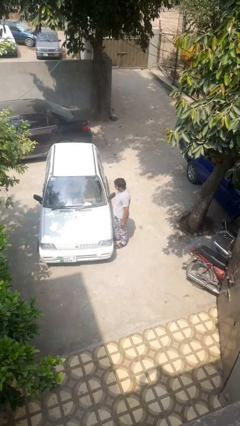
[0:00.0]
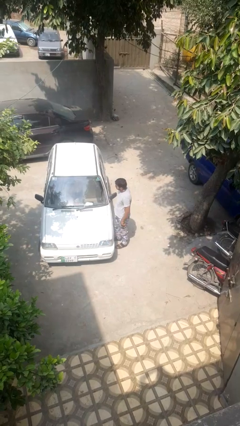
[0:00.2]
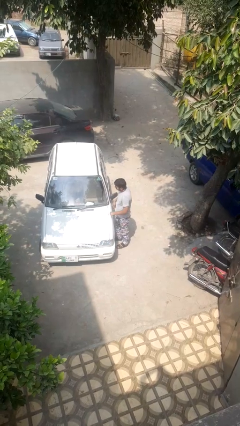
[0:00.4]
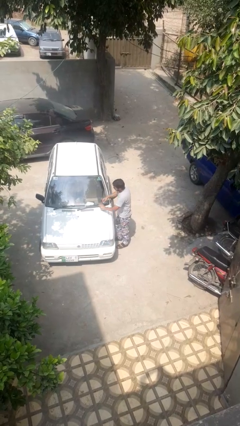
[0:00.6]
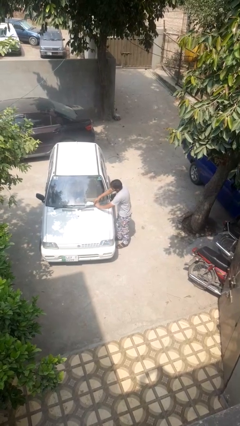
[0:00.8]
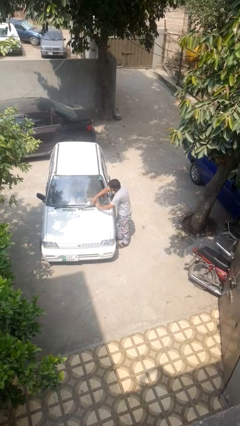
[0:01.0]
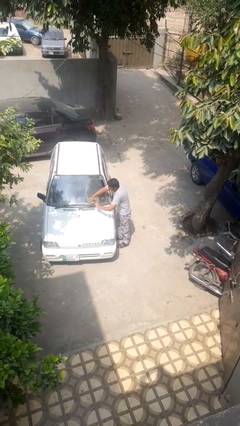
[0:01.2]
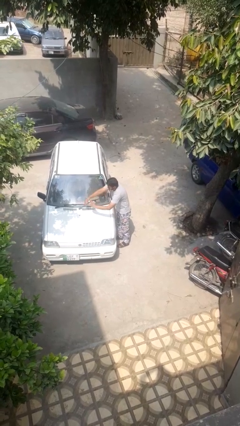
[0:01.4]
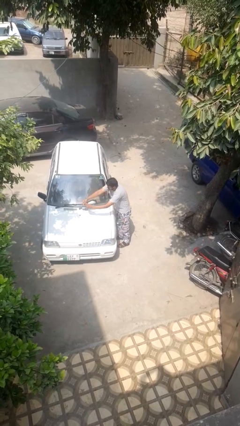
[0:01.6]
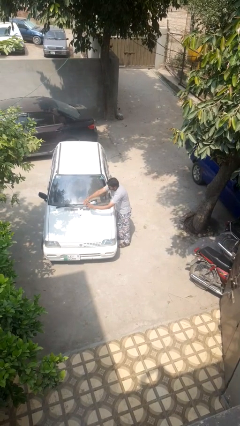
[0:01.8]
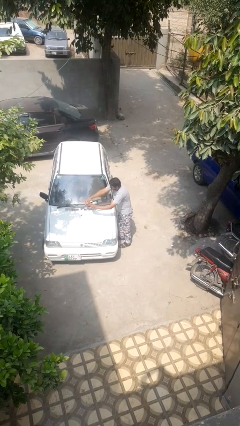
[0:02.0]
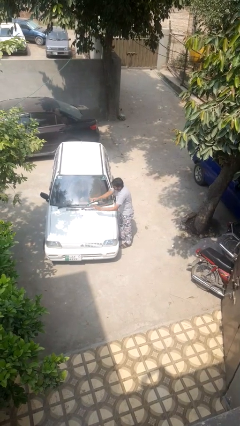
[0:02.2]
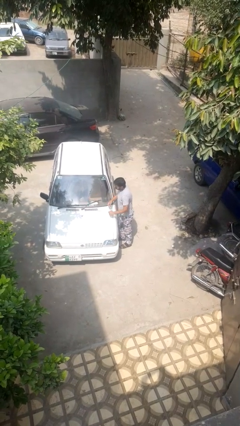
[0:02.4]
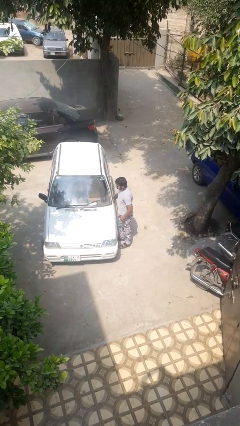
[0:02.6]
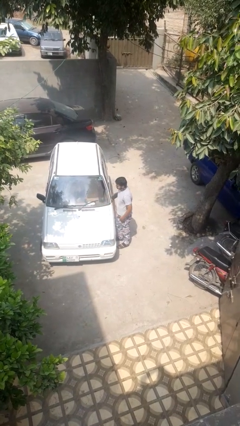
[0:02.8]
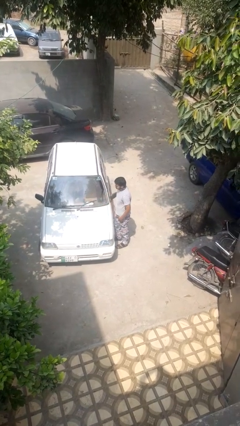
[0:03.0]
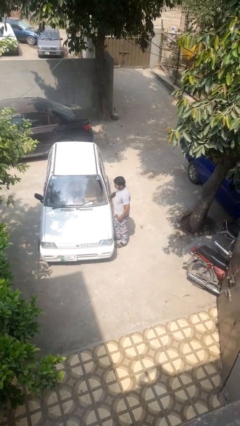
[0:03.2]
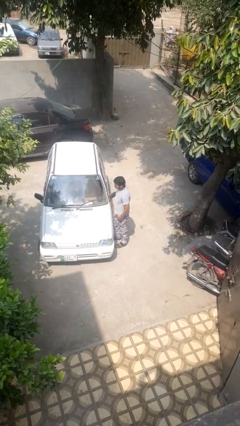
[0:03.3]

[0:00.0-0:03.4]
person flips up car wipers

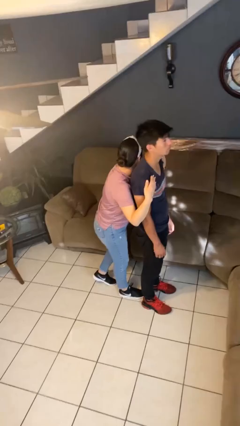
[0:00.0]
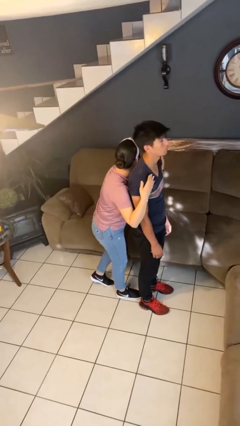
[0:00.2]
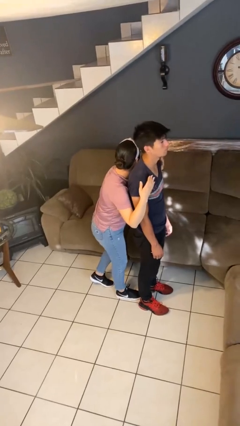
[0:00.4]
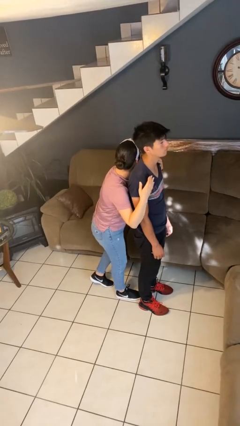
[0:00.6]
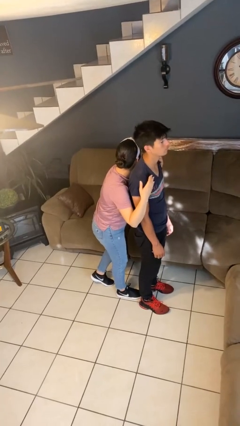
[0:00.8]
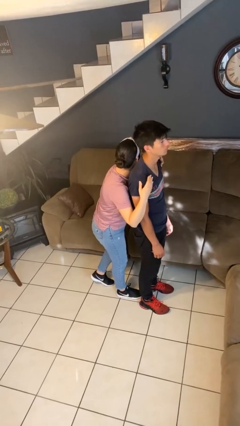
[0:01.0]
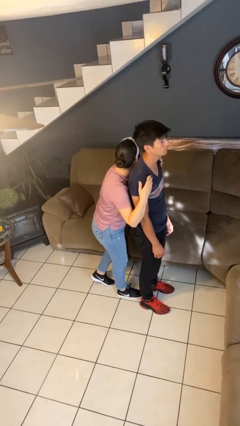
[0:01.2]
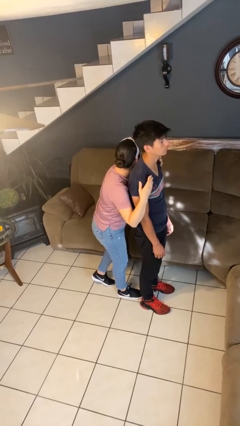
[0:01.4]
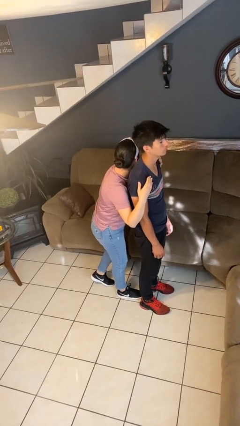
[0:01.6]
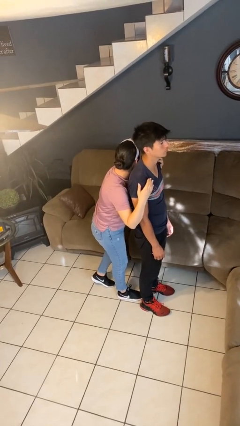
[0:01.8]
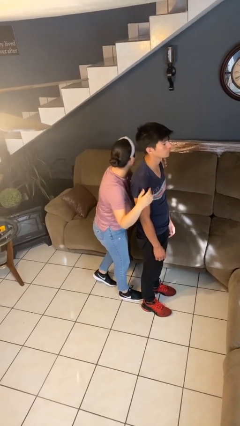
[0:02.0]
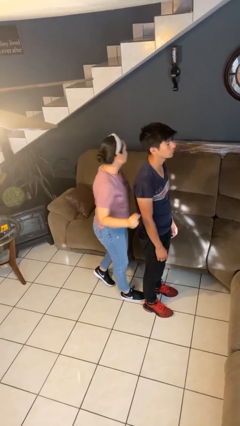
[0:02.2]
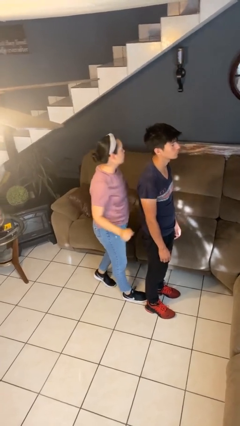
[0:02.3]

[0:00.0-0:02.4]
person hugs person from behind

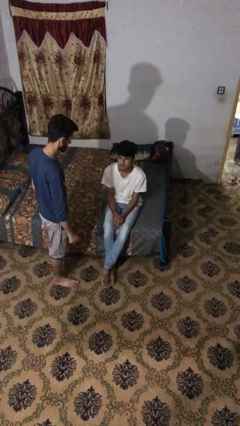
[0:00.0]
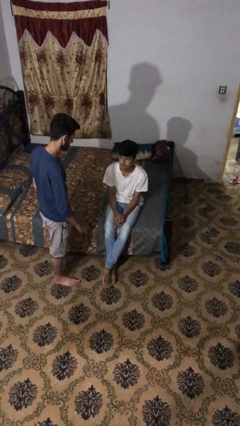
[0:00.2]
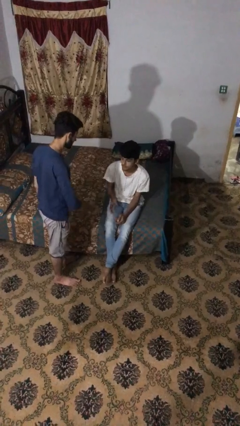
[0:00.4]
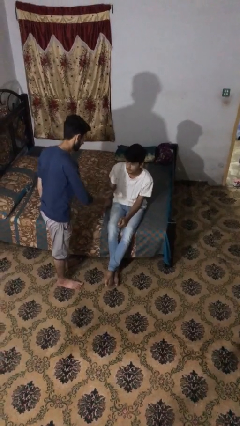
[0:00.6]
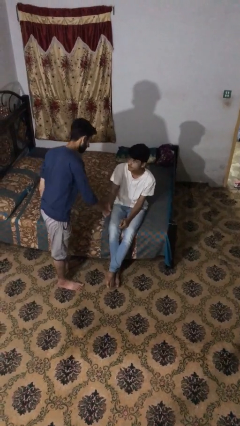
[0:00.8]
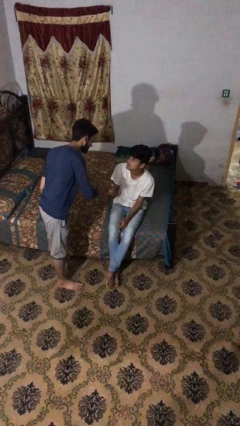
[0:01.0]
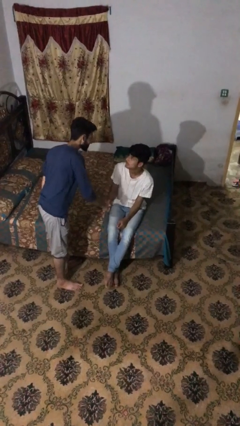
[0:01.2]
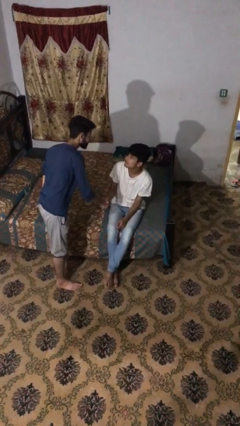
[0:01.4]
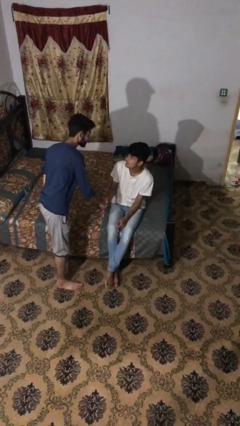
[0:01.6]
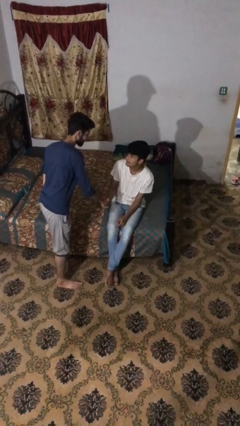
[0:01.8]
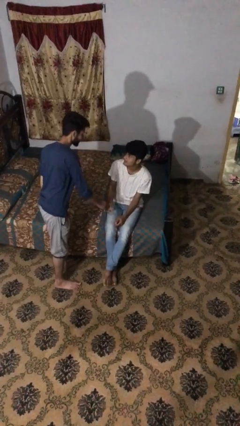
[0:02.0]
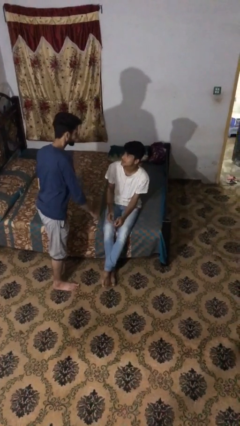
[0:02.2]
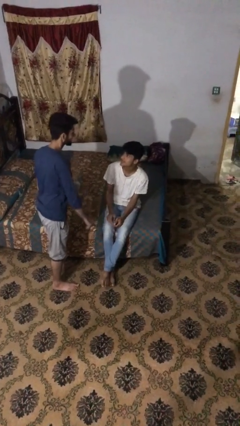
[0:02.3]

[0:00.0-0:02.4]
person shakes hand

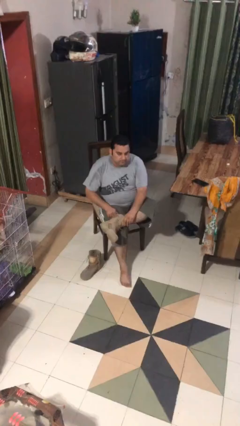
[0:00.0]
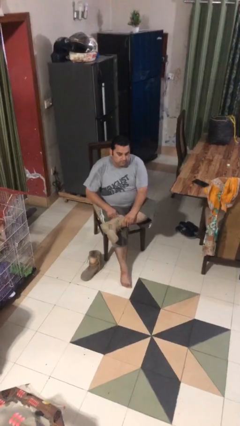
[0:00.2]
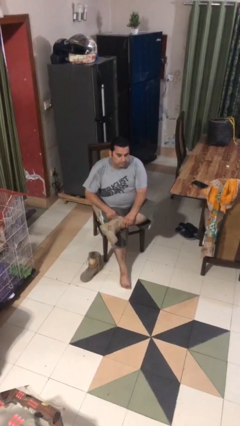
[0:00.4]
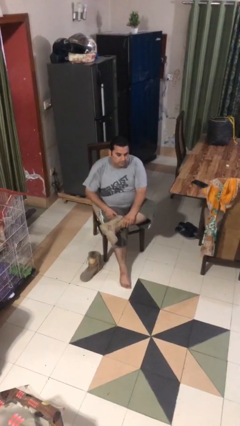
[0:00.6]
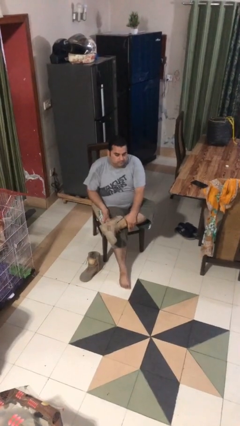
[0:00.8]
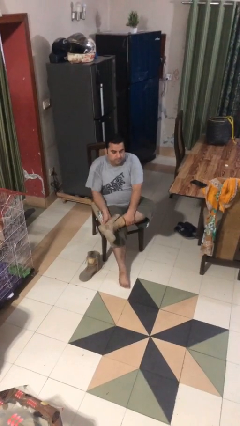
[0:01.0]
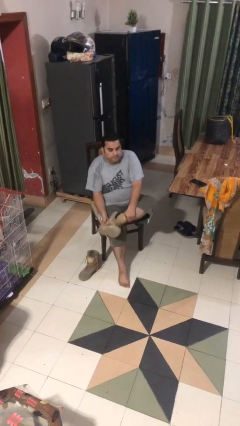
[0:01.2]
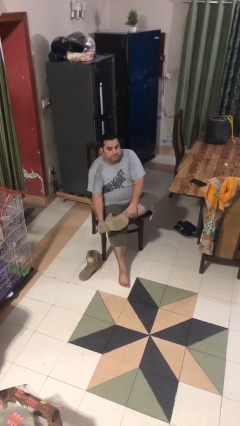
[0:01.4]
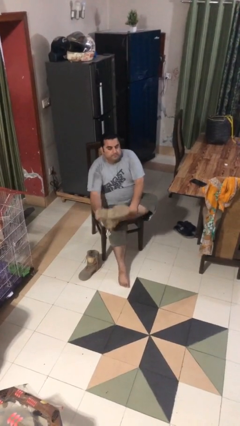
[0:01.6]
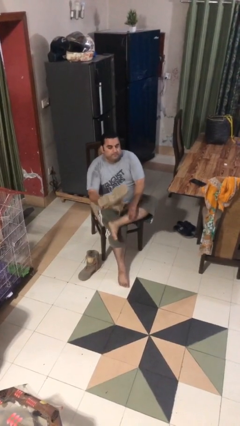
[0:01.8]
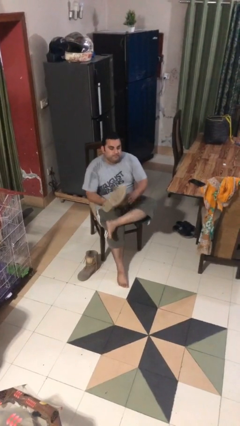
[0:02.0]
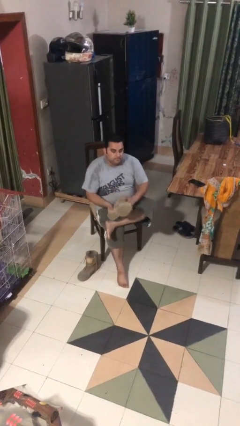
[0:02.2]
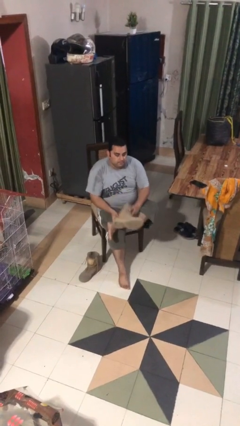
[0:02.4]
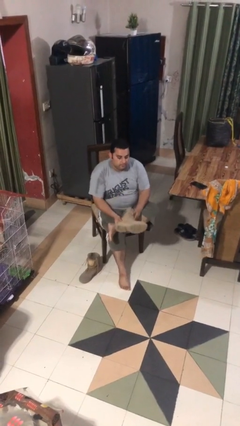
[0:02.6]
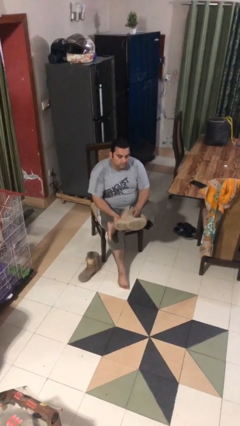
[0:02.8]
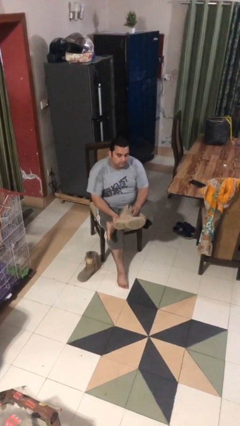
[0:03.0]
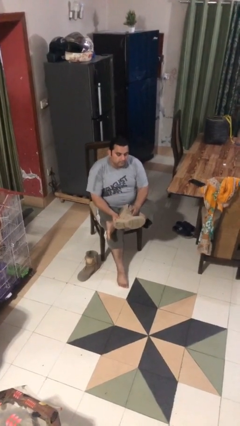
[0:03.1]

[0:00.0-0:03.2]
person takes off boots

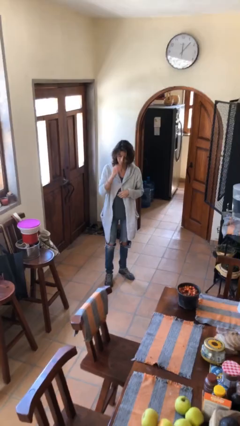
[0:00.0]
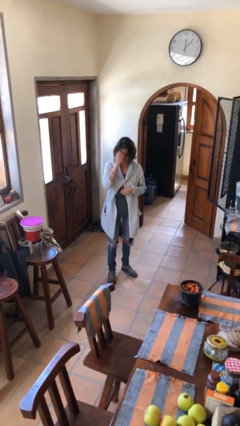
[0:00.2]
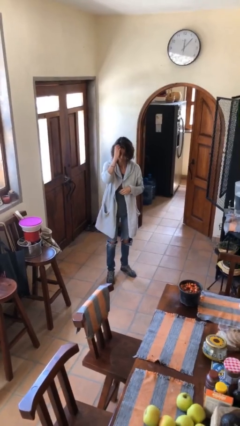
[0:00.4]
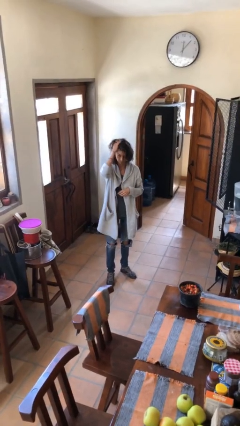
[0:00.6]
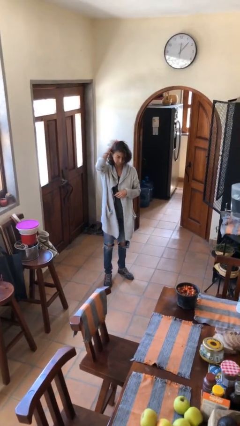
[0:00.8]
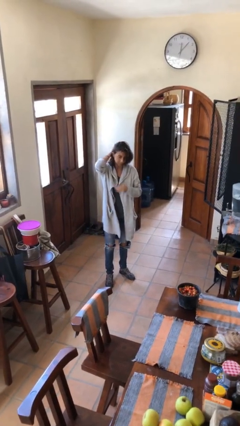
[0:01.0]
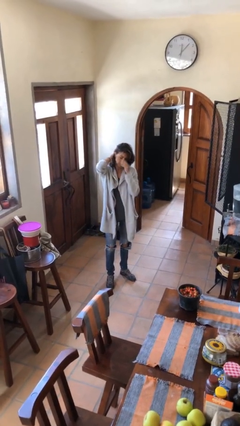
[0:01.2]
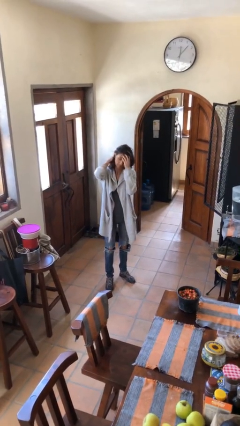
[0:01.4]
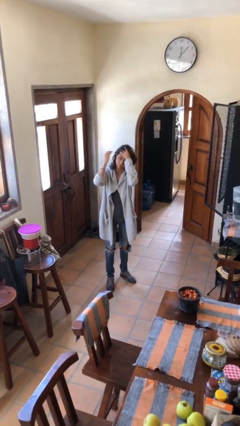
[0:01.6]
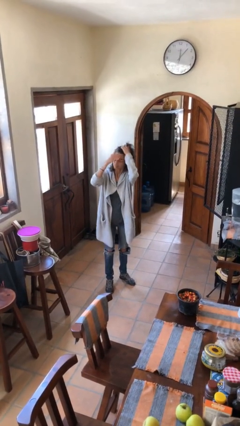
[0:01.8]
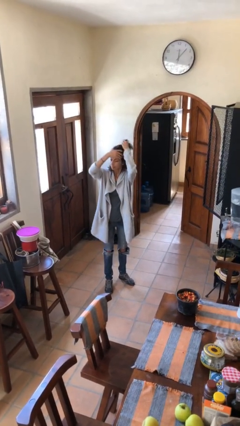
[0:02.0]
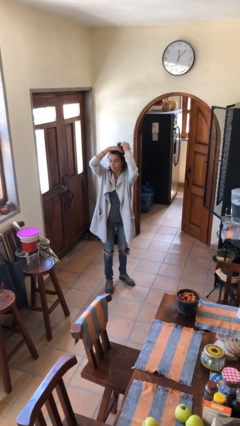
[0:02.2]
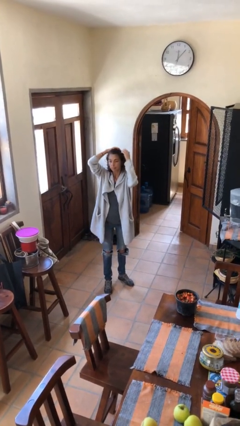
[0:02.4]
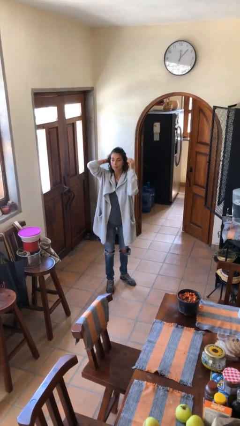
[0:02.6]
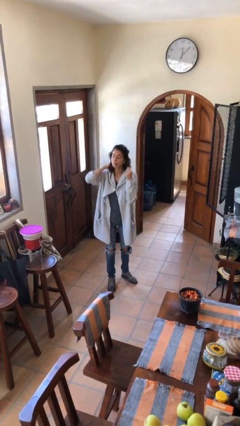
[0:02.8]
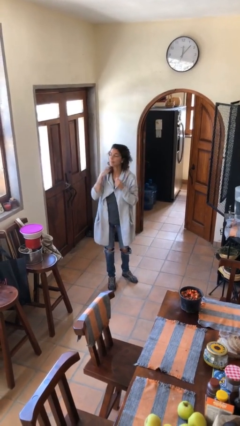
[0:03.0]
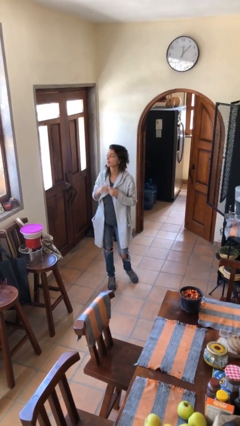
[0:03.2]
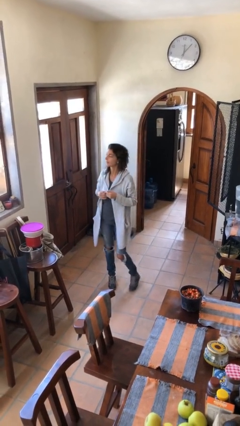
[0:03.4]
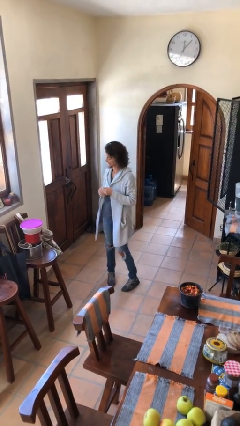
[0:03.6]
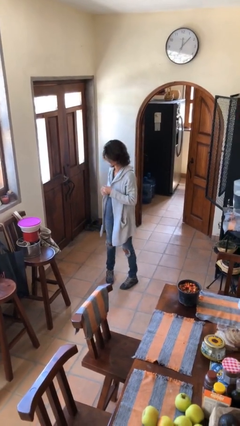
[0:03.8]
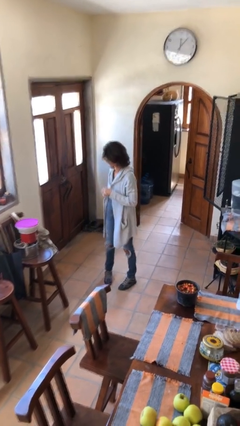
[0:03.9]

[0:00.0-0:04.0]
person strokes hair

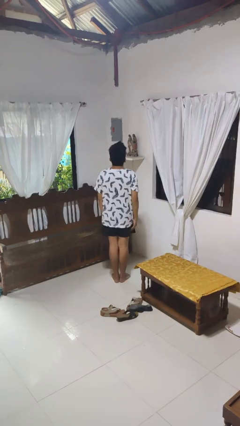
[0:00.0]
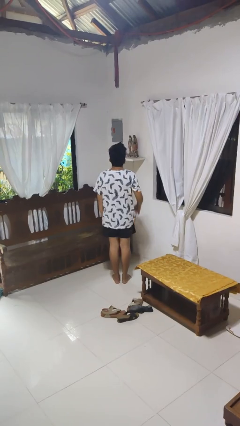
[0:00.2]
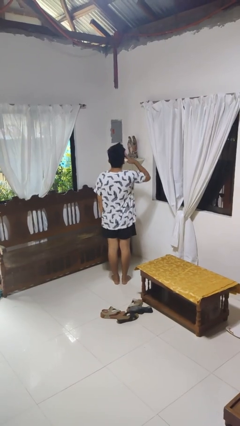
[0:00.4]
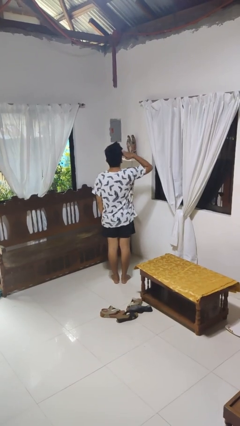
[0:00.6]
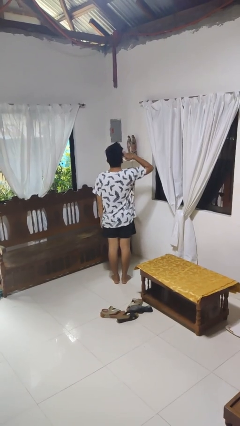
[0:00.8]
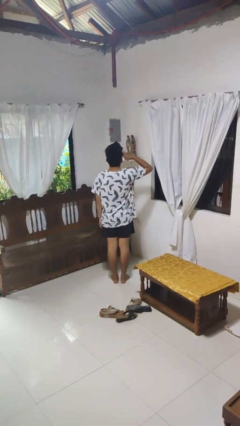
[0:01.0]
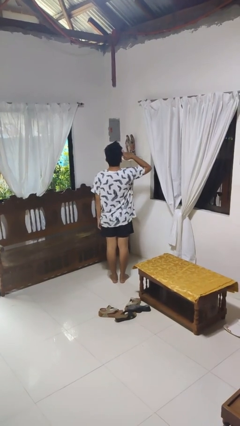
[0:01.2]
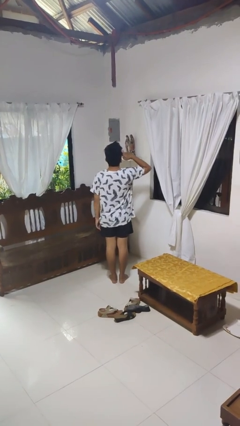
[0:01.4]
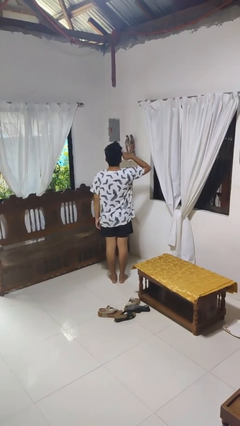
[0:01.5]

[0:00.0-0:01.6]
person salutes

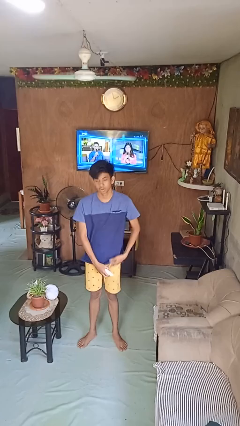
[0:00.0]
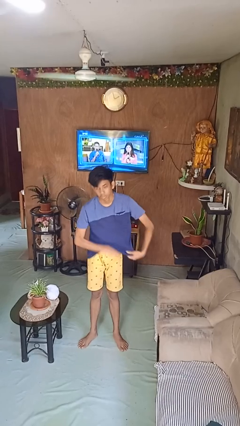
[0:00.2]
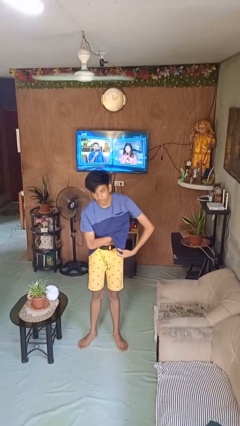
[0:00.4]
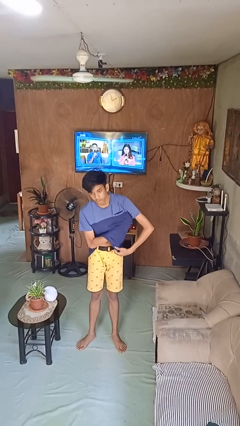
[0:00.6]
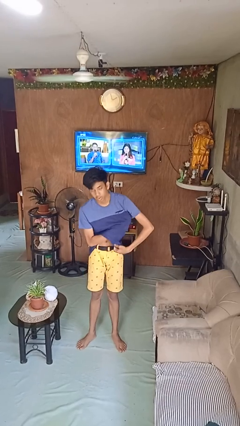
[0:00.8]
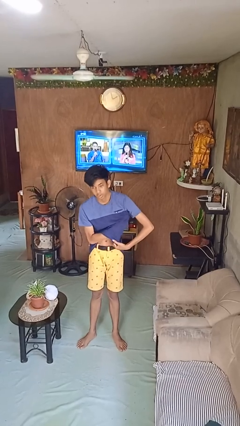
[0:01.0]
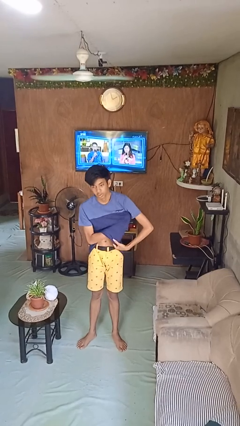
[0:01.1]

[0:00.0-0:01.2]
person applies deodorant
